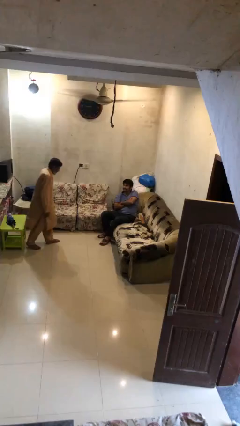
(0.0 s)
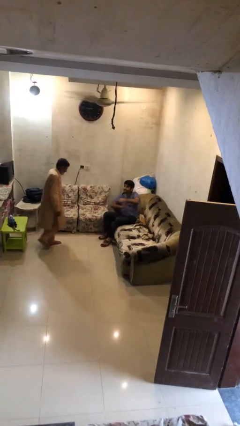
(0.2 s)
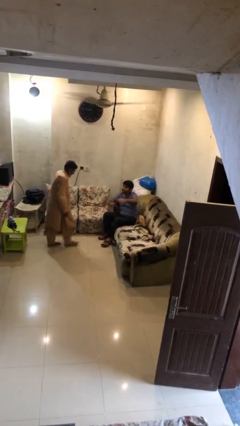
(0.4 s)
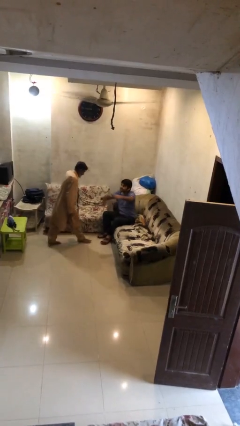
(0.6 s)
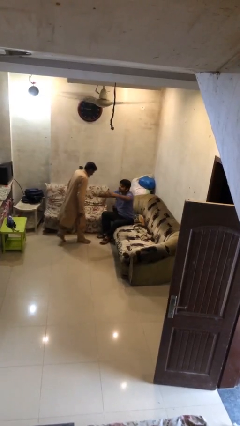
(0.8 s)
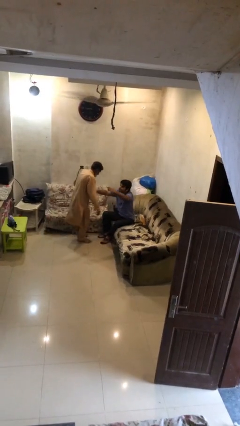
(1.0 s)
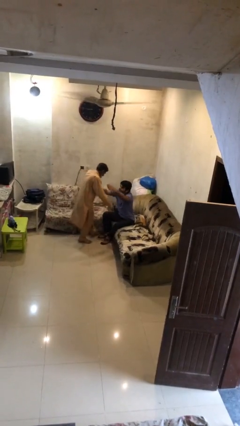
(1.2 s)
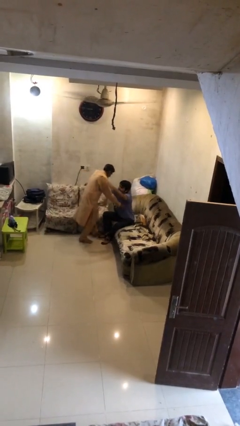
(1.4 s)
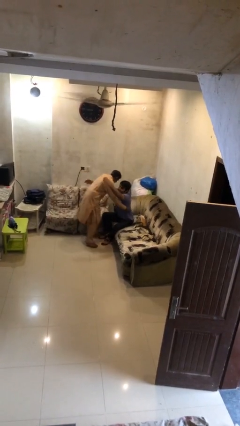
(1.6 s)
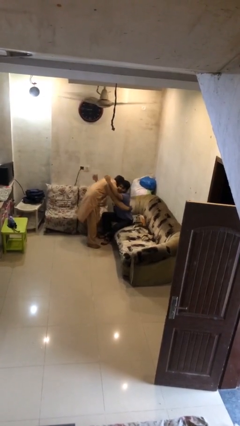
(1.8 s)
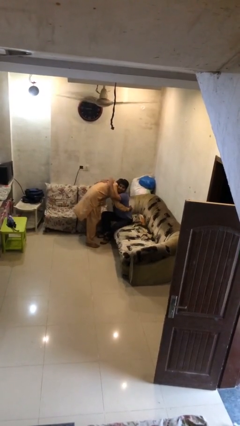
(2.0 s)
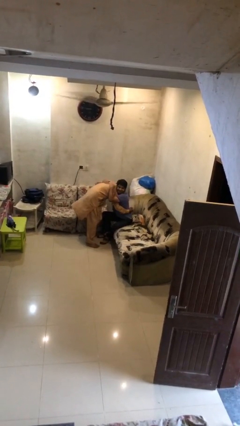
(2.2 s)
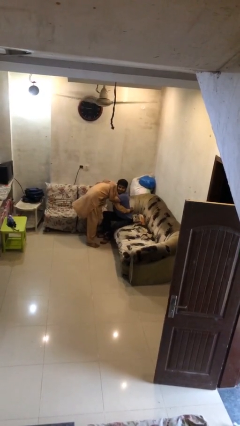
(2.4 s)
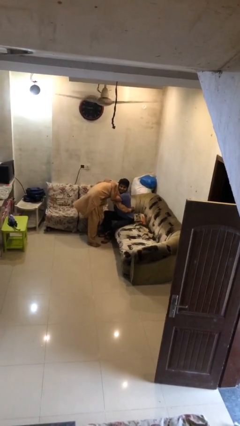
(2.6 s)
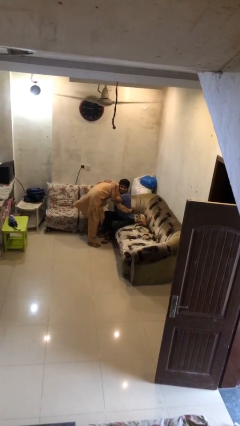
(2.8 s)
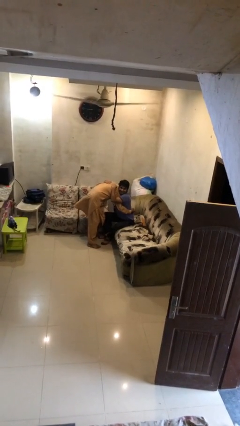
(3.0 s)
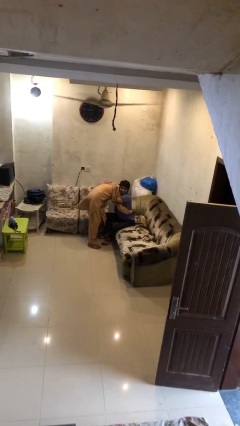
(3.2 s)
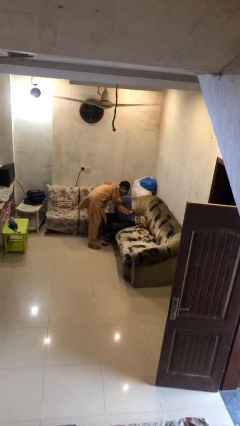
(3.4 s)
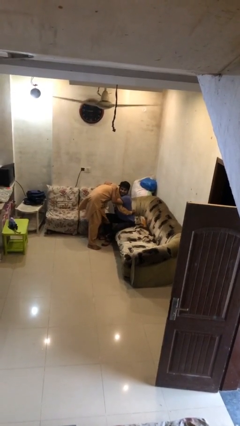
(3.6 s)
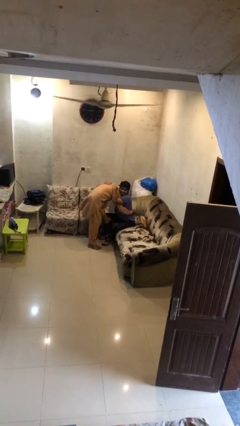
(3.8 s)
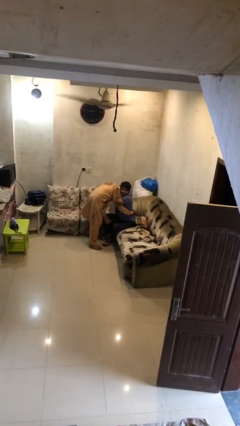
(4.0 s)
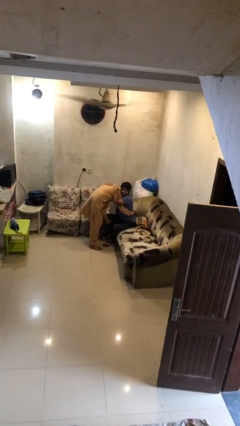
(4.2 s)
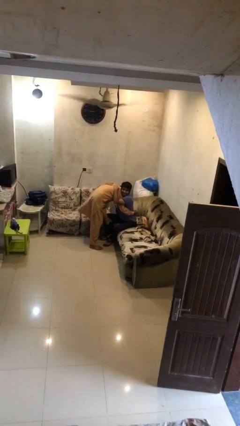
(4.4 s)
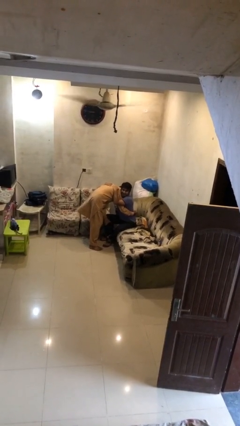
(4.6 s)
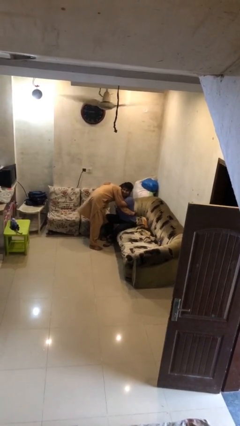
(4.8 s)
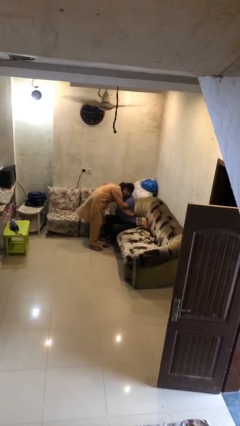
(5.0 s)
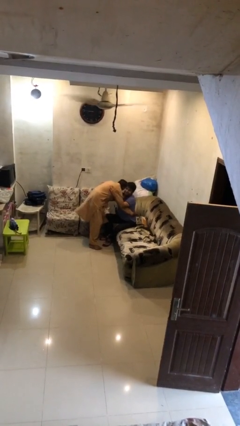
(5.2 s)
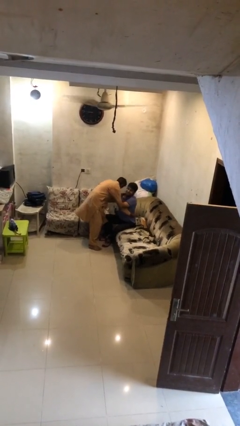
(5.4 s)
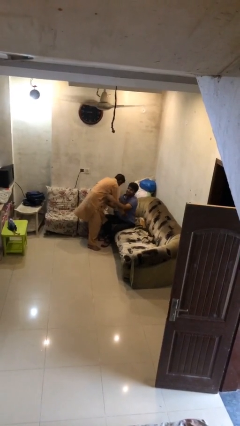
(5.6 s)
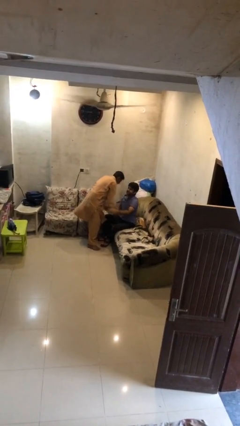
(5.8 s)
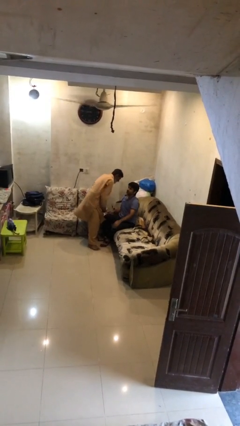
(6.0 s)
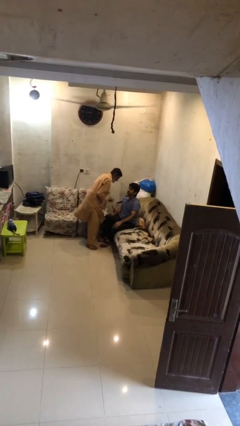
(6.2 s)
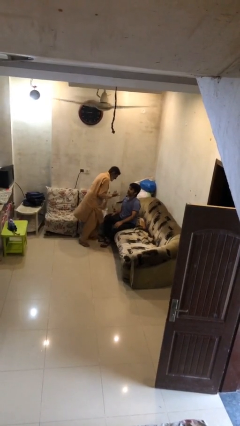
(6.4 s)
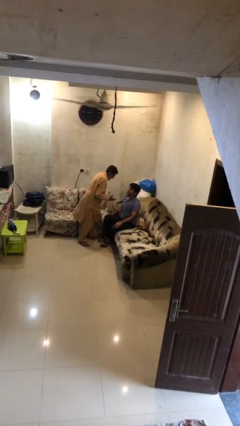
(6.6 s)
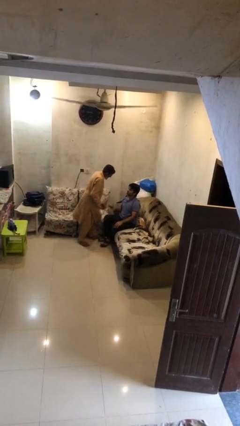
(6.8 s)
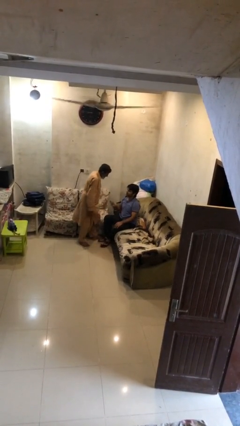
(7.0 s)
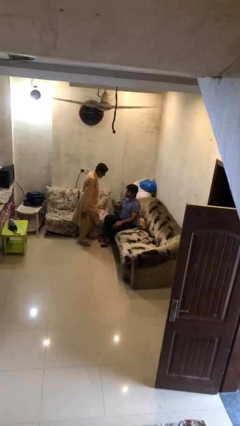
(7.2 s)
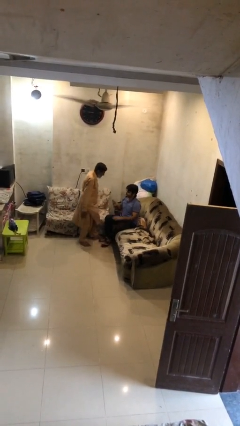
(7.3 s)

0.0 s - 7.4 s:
person embraces person

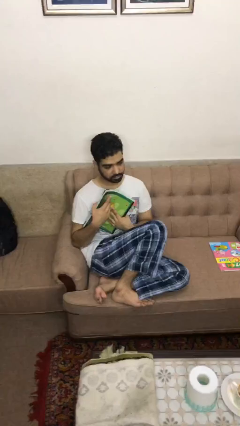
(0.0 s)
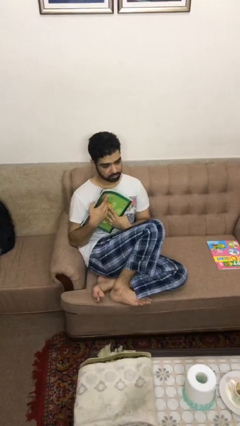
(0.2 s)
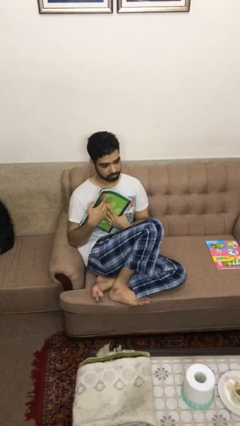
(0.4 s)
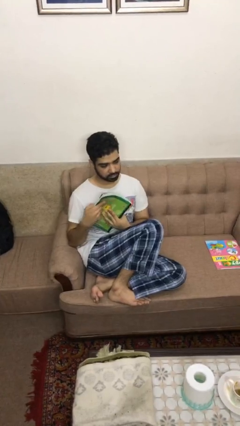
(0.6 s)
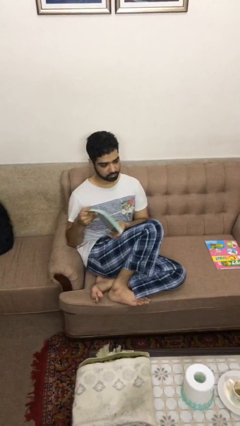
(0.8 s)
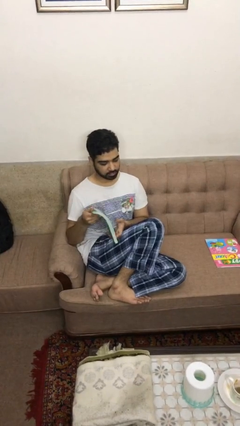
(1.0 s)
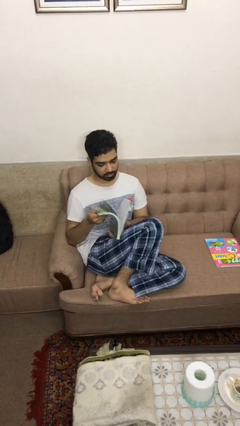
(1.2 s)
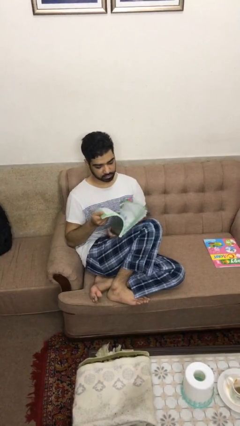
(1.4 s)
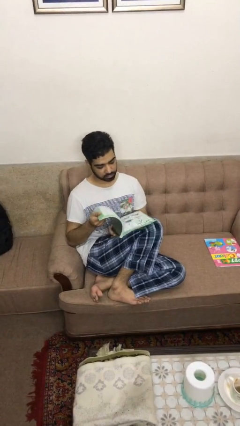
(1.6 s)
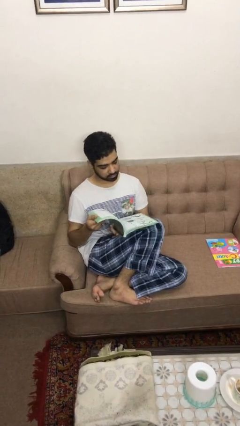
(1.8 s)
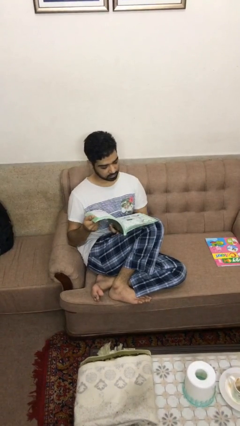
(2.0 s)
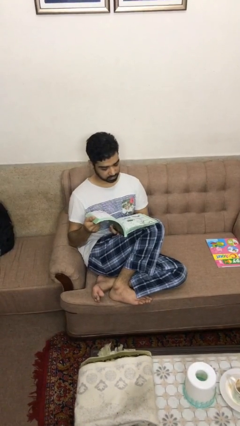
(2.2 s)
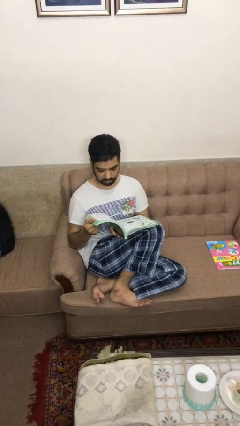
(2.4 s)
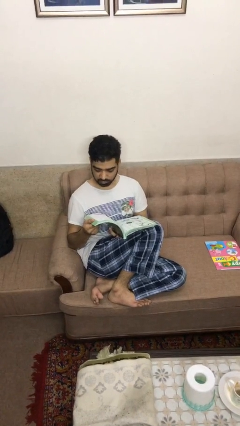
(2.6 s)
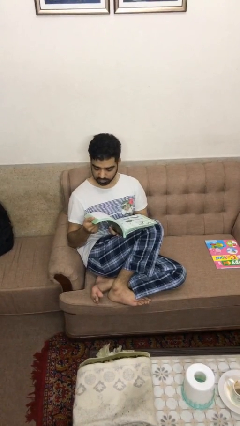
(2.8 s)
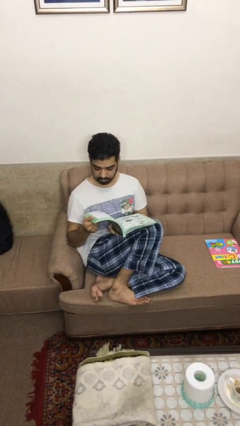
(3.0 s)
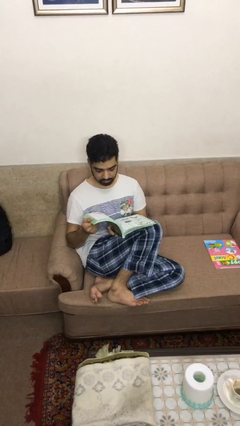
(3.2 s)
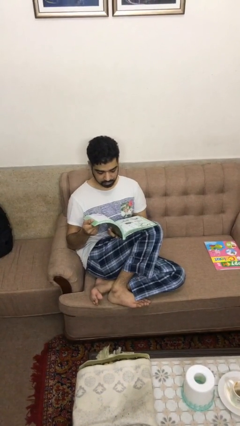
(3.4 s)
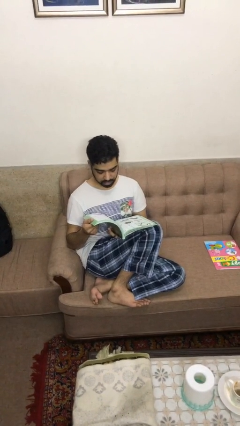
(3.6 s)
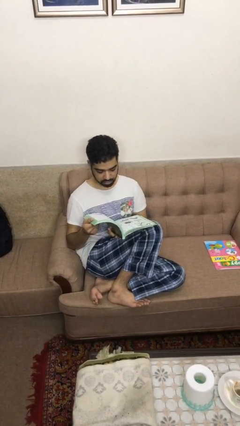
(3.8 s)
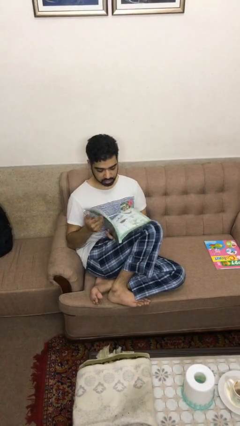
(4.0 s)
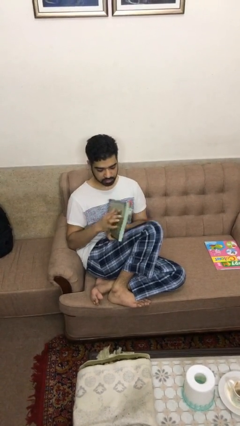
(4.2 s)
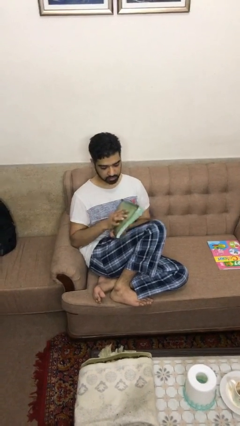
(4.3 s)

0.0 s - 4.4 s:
person reads book

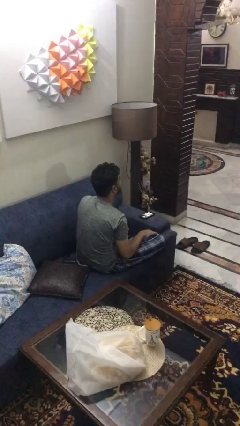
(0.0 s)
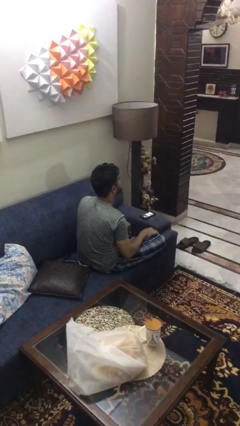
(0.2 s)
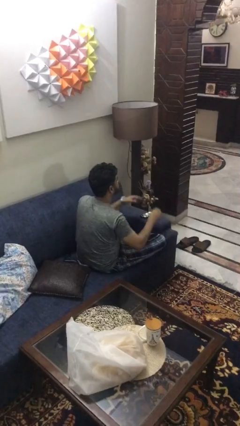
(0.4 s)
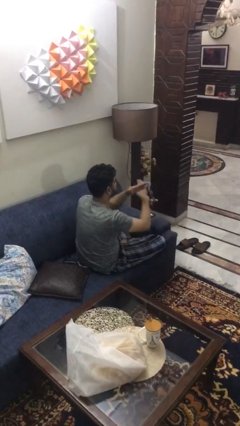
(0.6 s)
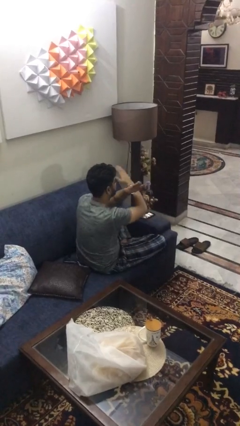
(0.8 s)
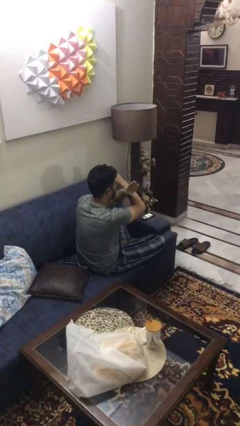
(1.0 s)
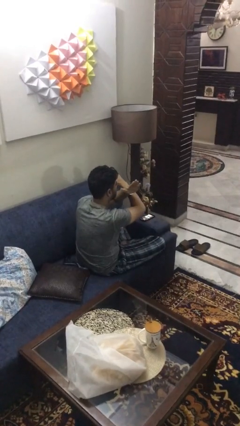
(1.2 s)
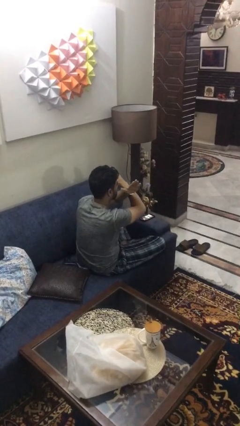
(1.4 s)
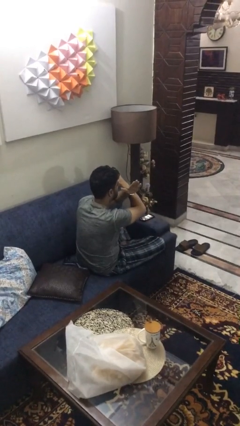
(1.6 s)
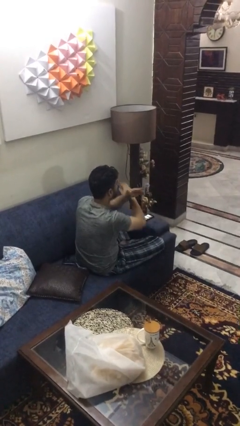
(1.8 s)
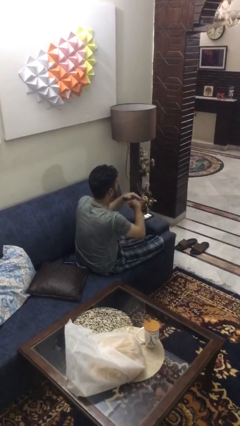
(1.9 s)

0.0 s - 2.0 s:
person gestures arms x

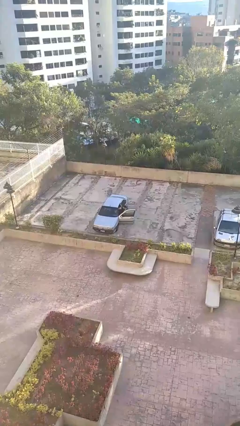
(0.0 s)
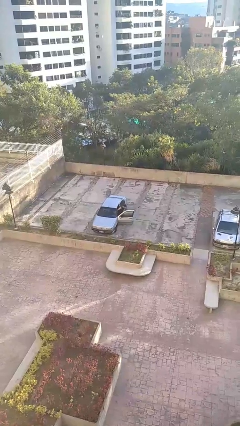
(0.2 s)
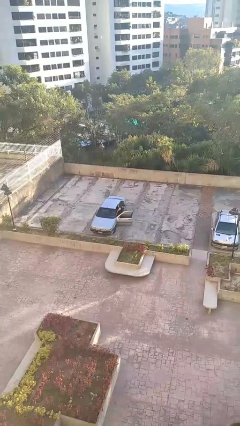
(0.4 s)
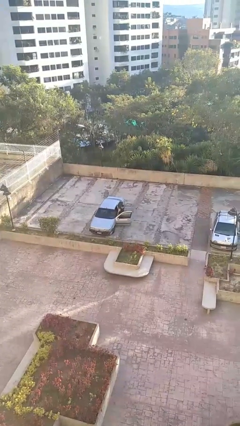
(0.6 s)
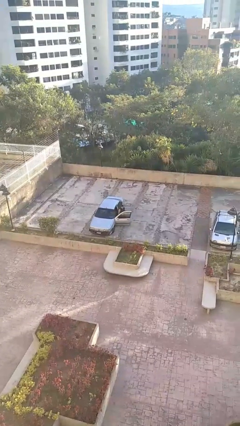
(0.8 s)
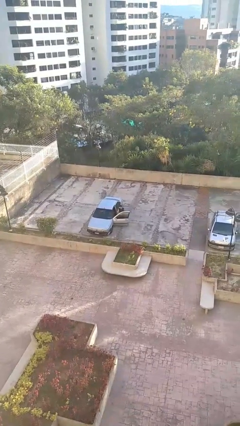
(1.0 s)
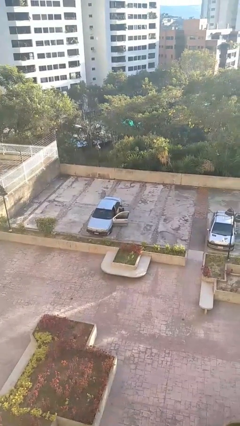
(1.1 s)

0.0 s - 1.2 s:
person exits car

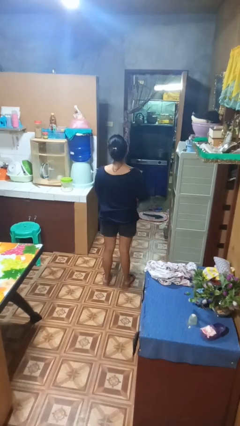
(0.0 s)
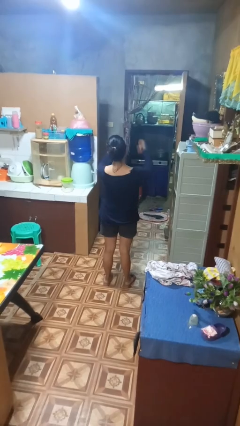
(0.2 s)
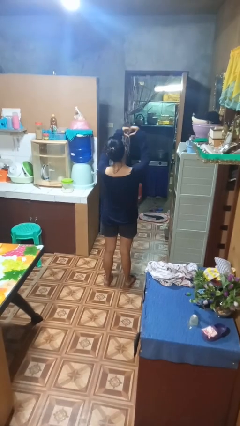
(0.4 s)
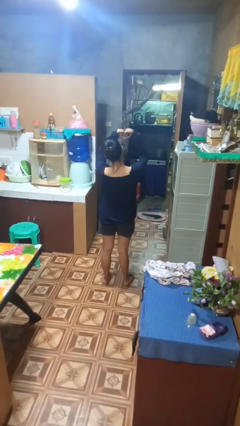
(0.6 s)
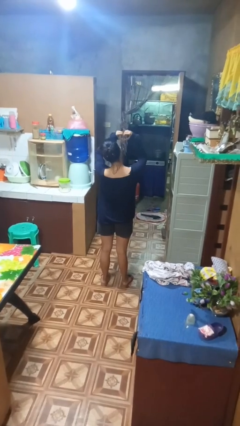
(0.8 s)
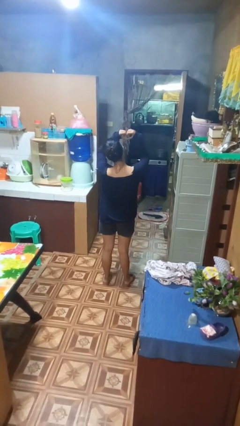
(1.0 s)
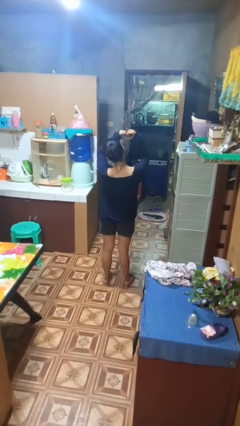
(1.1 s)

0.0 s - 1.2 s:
person gestures heart

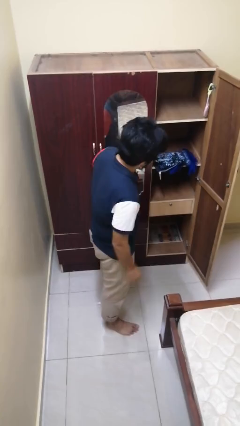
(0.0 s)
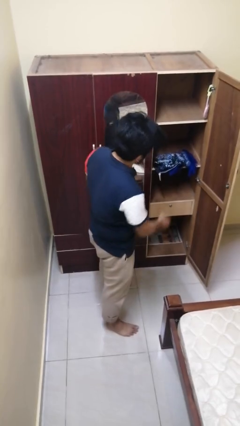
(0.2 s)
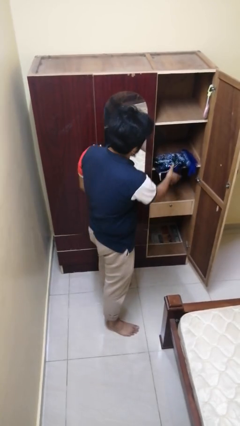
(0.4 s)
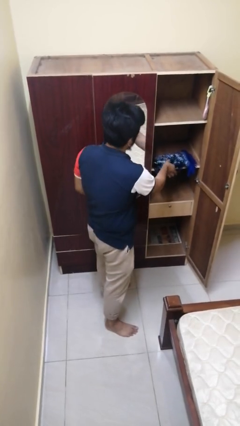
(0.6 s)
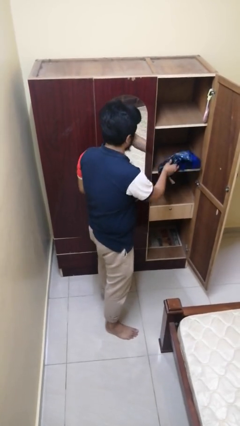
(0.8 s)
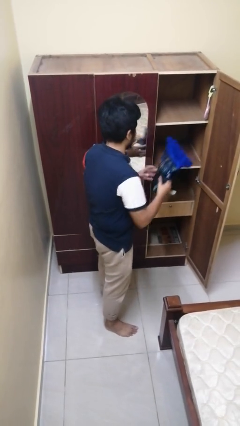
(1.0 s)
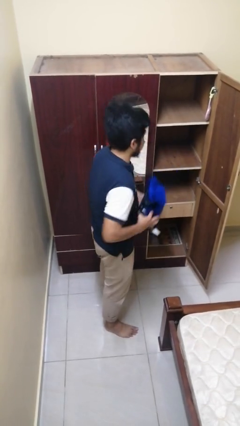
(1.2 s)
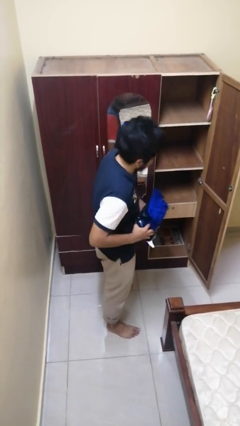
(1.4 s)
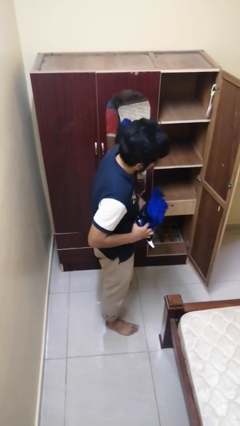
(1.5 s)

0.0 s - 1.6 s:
person picks up object from cabinet
